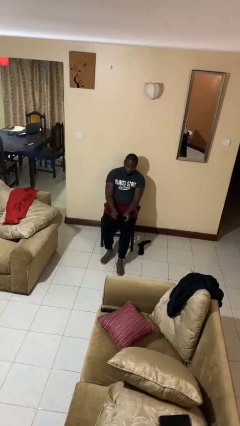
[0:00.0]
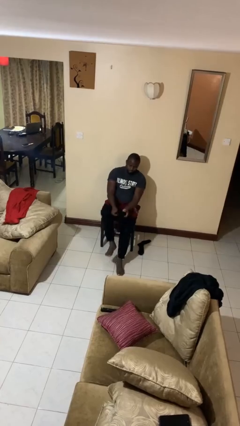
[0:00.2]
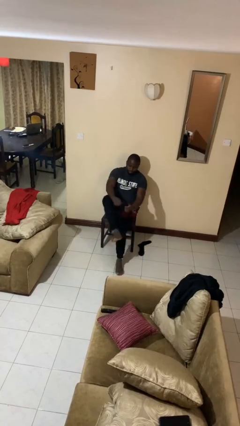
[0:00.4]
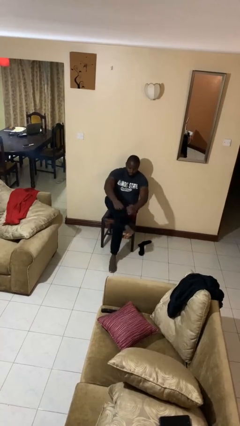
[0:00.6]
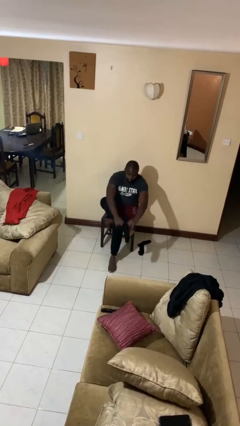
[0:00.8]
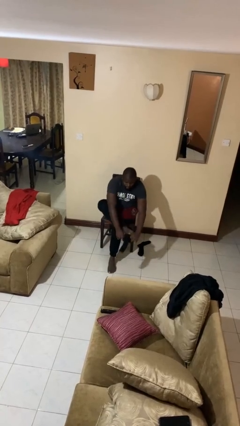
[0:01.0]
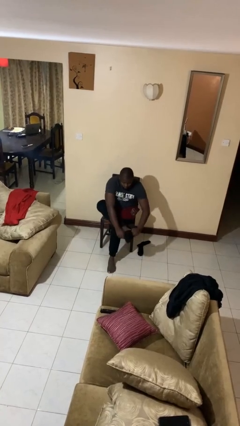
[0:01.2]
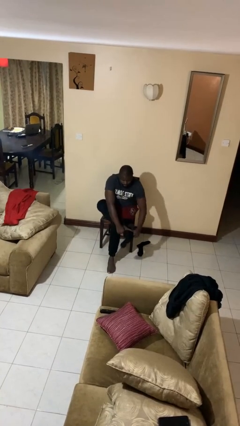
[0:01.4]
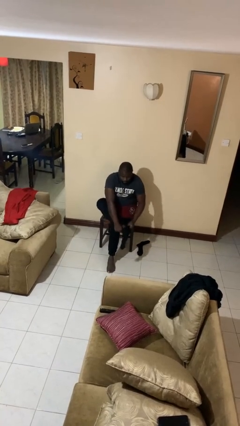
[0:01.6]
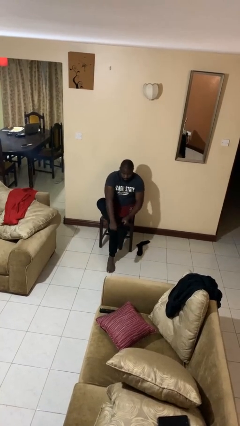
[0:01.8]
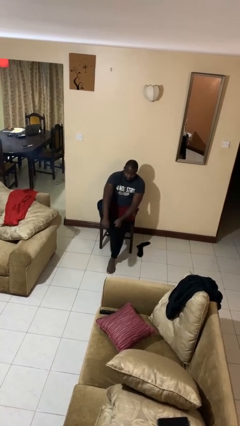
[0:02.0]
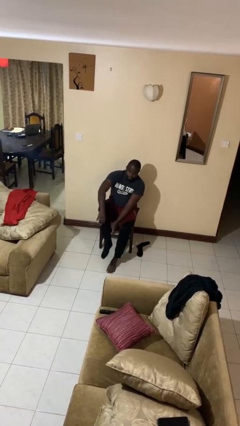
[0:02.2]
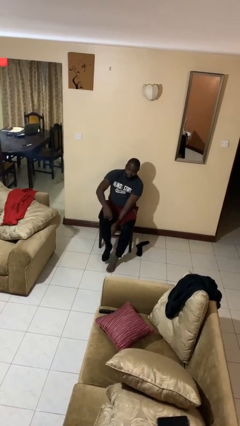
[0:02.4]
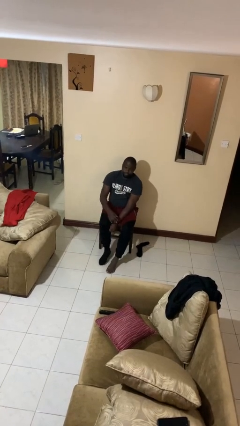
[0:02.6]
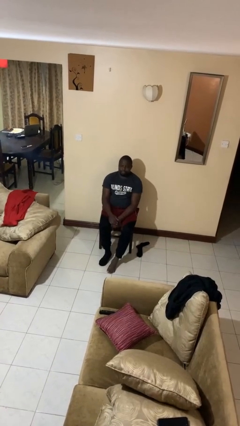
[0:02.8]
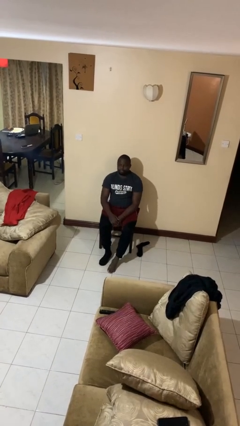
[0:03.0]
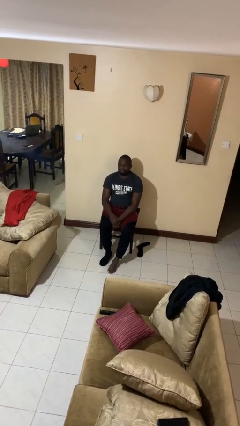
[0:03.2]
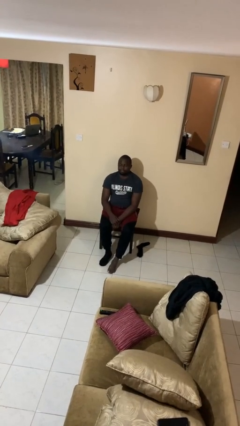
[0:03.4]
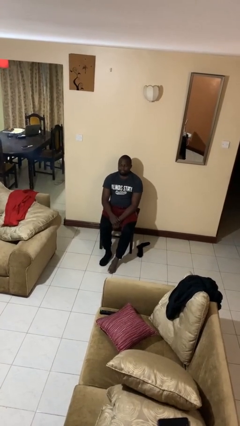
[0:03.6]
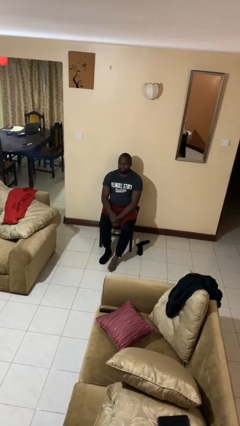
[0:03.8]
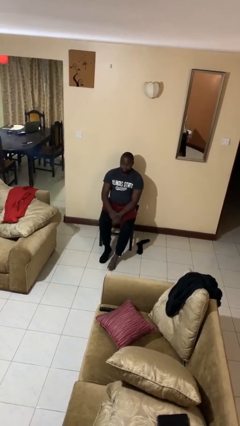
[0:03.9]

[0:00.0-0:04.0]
person puts on socks

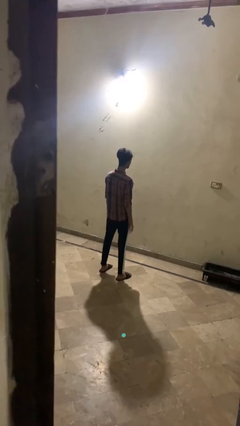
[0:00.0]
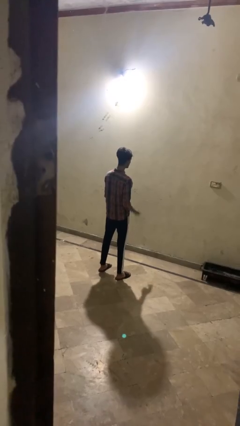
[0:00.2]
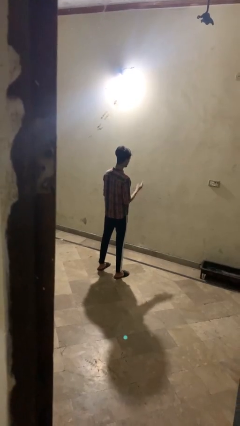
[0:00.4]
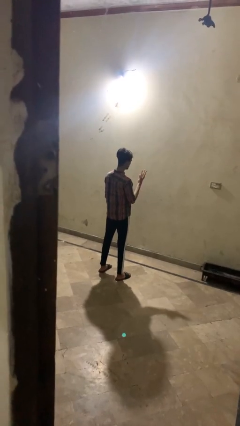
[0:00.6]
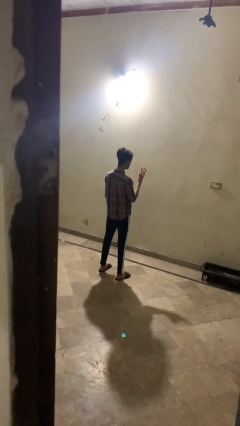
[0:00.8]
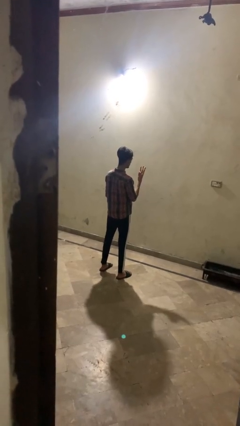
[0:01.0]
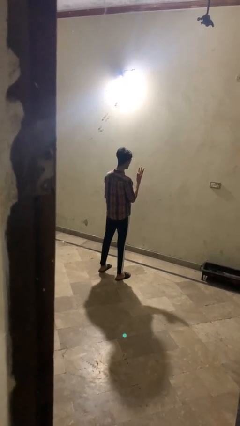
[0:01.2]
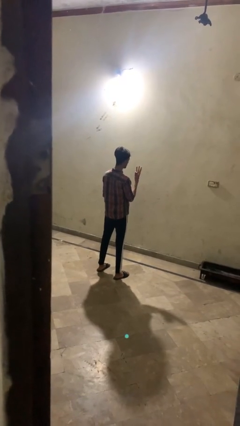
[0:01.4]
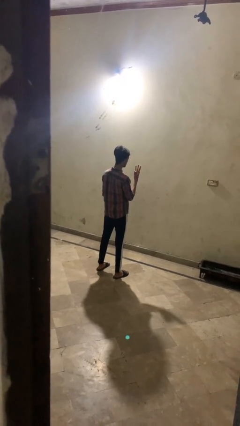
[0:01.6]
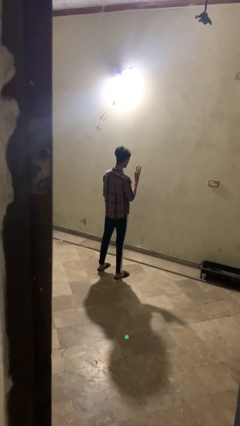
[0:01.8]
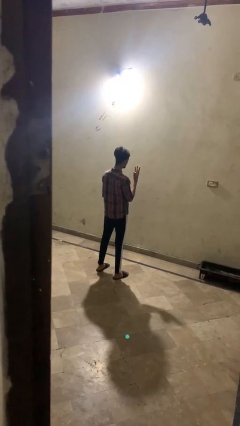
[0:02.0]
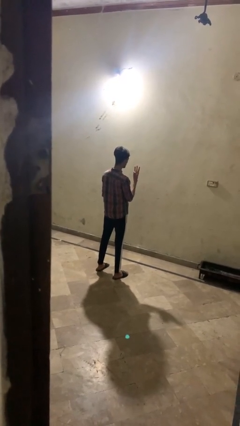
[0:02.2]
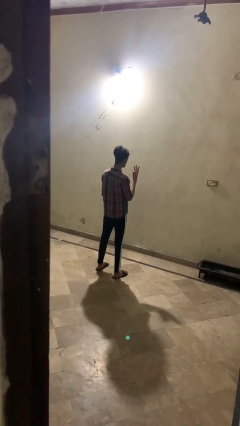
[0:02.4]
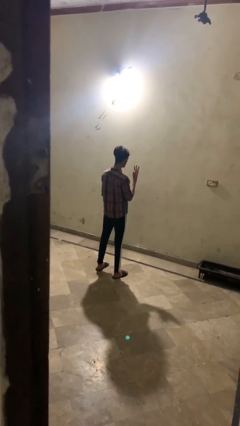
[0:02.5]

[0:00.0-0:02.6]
person gestures number three

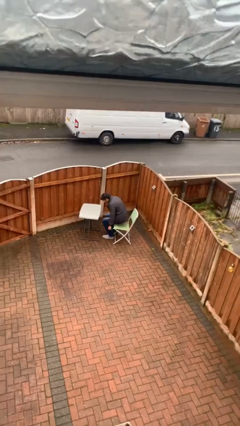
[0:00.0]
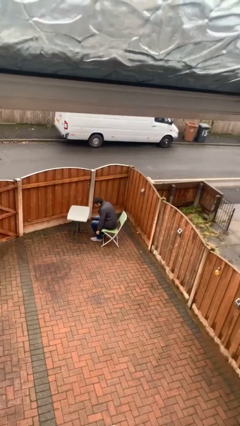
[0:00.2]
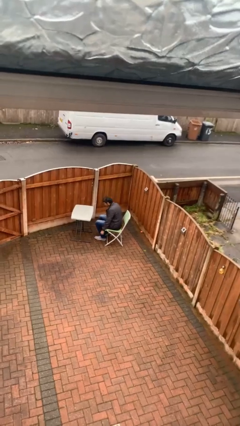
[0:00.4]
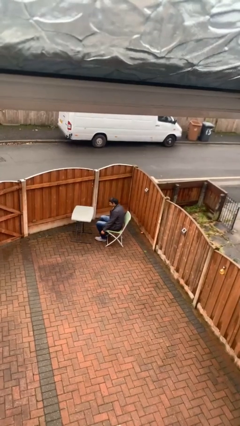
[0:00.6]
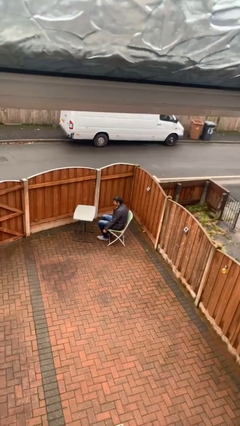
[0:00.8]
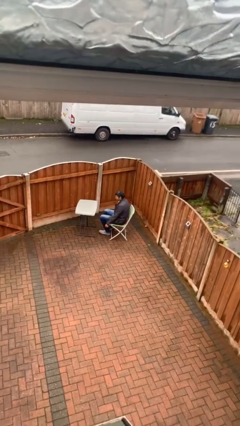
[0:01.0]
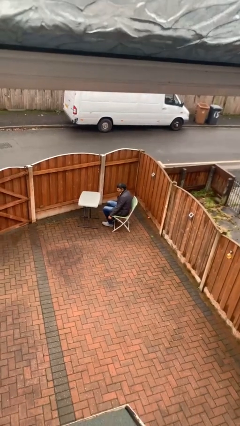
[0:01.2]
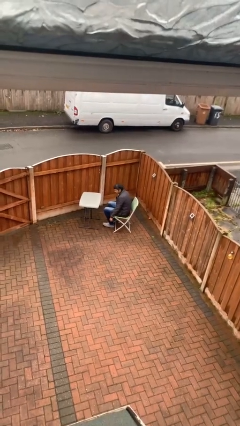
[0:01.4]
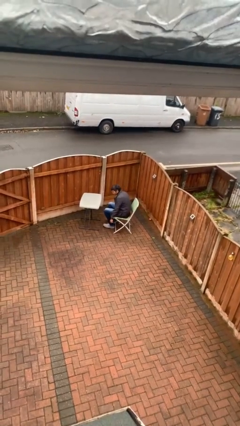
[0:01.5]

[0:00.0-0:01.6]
person sits down

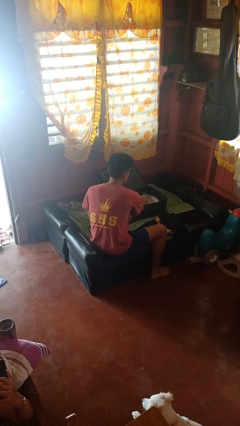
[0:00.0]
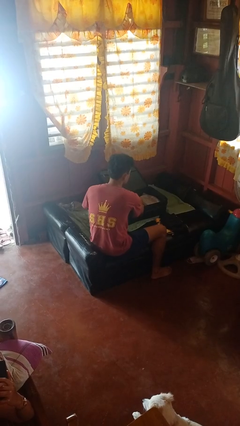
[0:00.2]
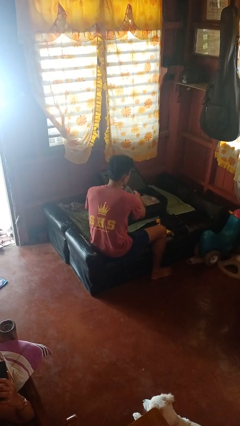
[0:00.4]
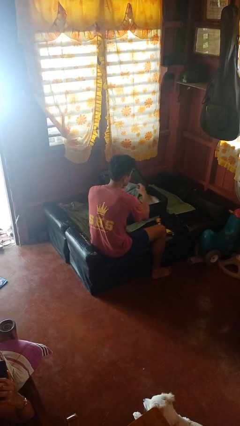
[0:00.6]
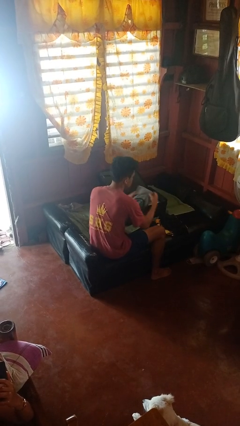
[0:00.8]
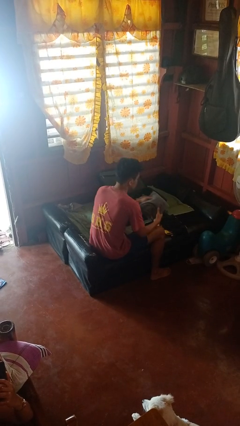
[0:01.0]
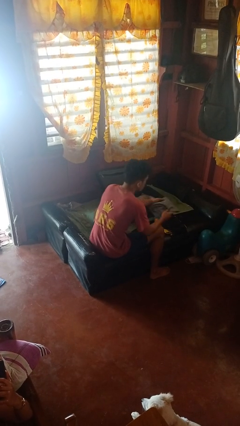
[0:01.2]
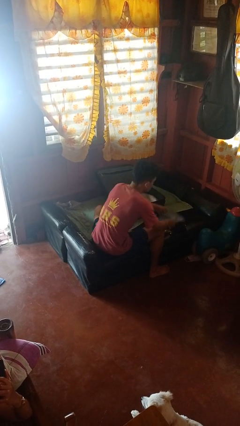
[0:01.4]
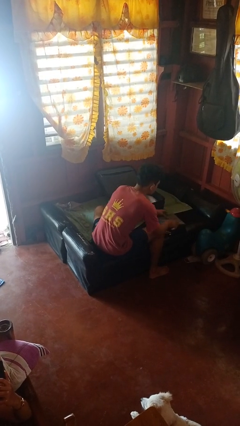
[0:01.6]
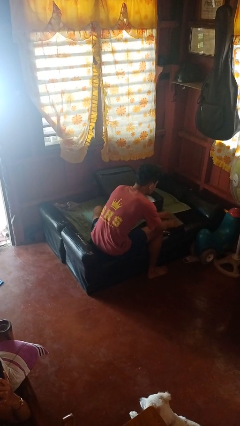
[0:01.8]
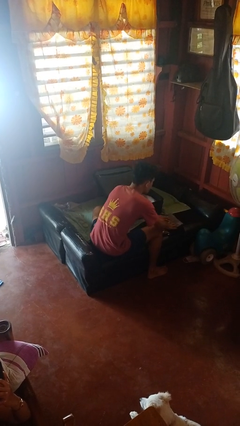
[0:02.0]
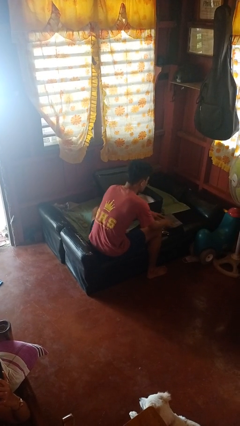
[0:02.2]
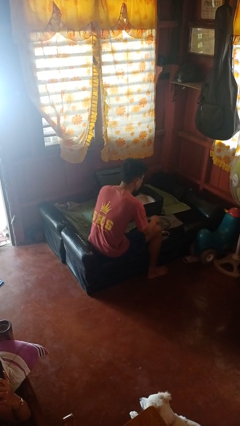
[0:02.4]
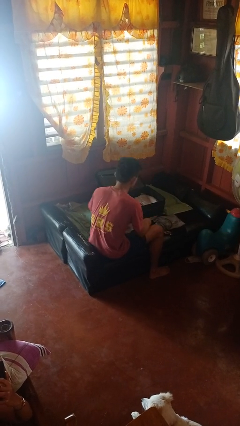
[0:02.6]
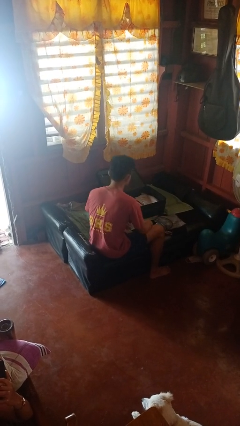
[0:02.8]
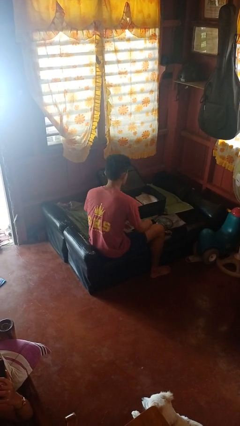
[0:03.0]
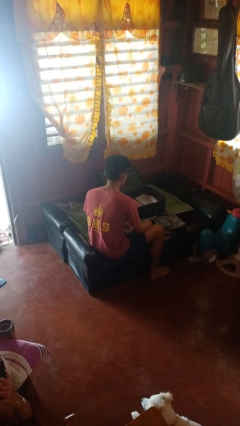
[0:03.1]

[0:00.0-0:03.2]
person unloads clothes from suitcase

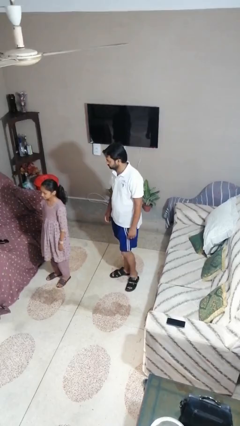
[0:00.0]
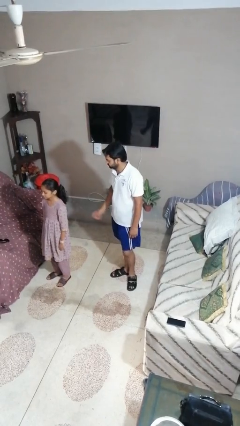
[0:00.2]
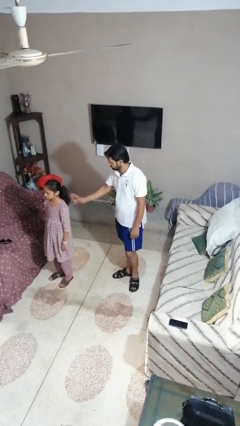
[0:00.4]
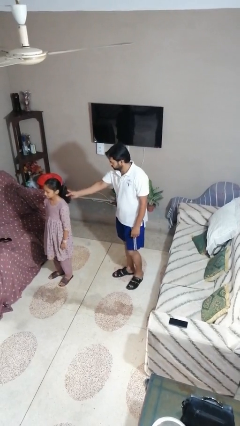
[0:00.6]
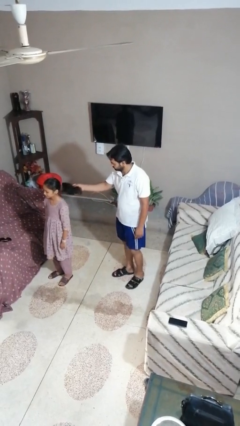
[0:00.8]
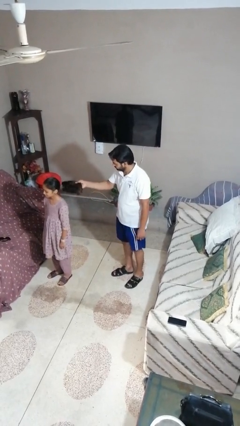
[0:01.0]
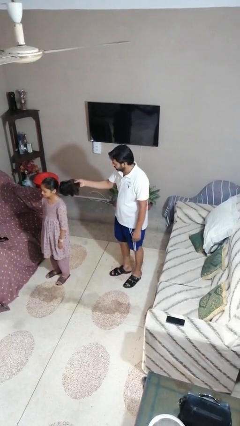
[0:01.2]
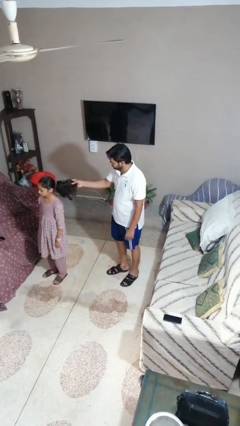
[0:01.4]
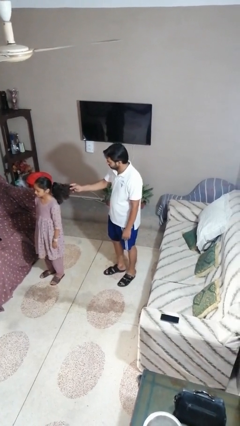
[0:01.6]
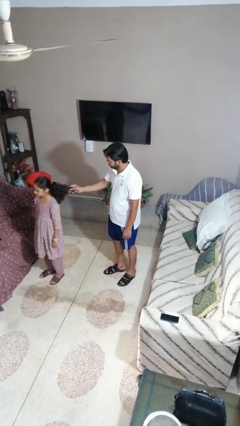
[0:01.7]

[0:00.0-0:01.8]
person grabs person by hair

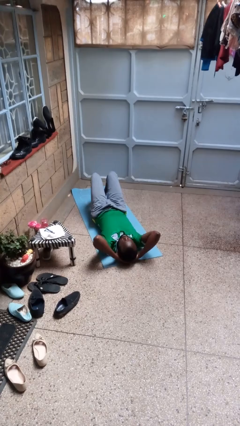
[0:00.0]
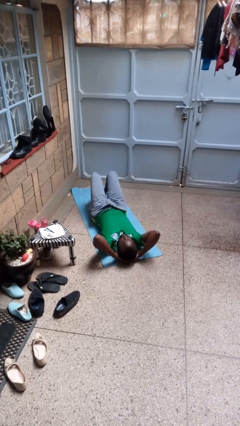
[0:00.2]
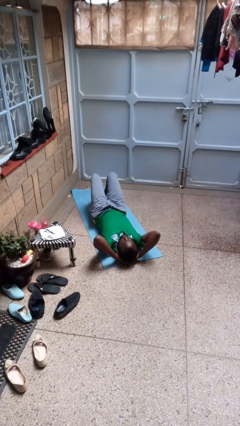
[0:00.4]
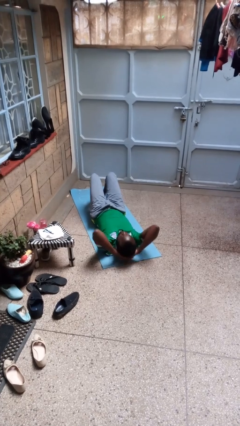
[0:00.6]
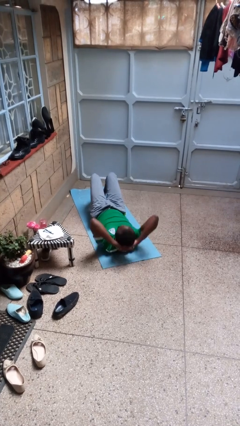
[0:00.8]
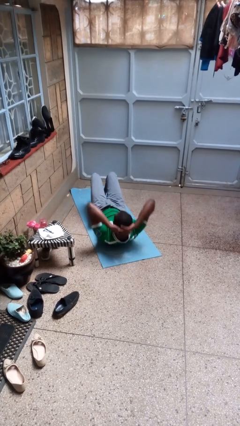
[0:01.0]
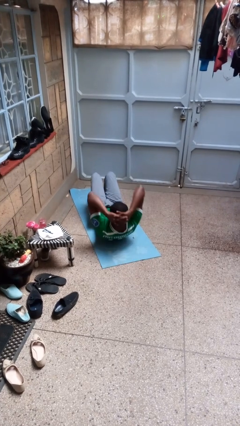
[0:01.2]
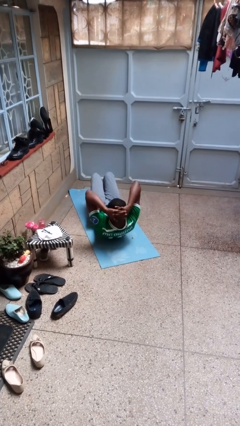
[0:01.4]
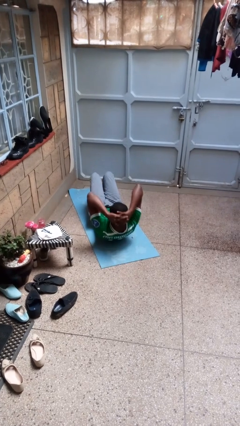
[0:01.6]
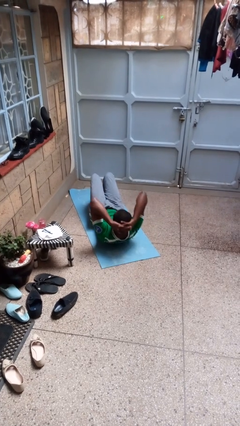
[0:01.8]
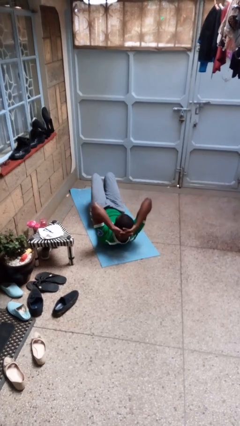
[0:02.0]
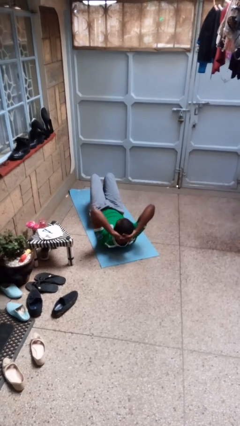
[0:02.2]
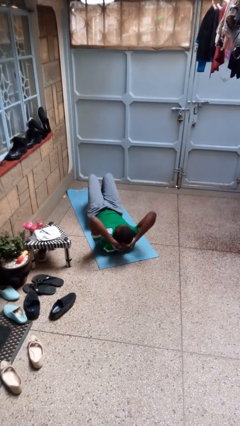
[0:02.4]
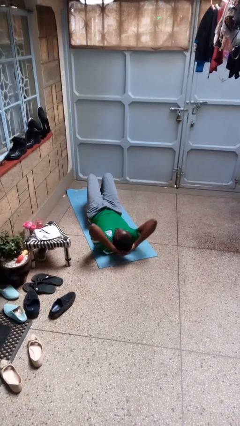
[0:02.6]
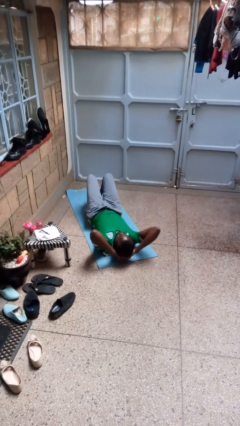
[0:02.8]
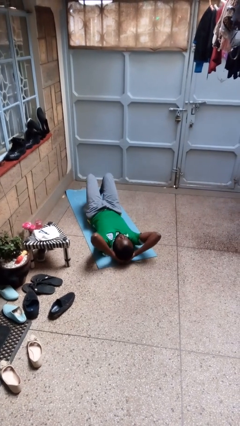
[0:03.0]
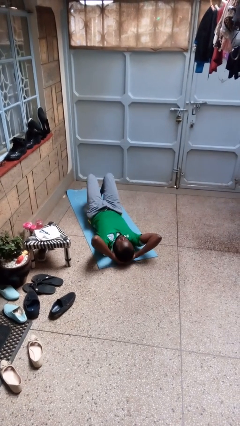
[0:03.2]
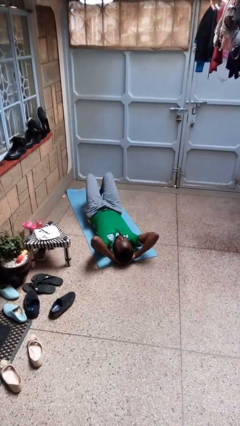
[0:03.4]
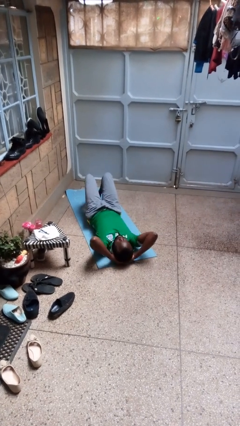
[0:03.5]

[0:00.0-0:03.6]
person exercises with situp

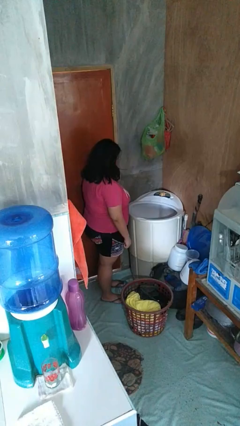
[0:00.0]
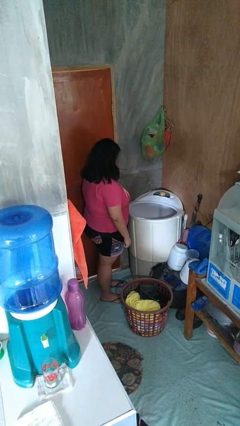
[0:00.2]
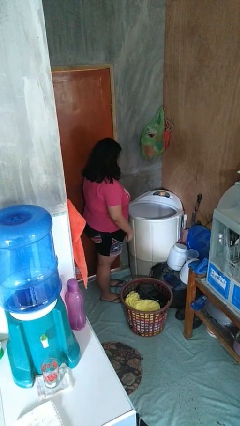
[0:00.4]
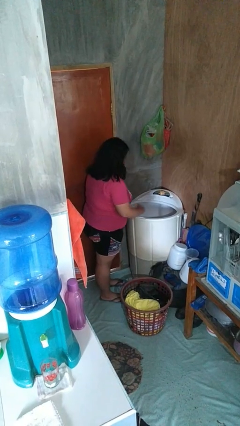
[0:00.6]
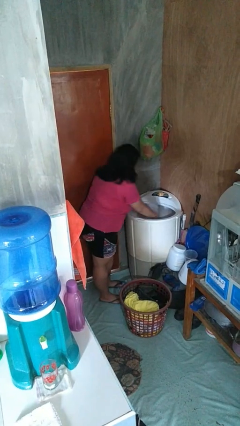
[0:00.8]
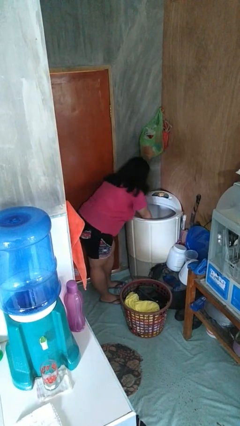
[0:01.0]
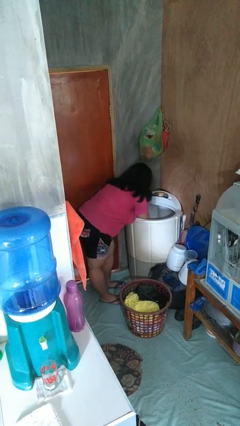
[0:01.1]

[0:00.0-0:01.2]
person unloads dryer
